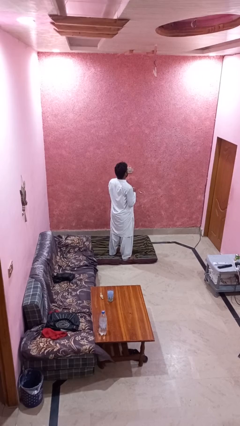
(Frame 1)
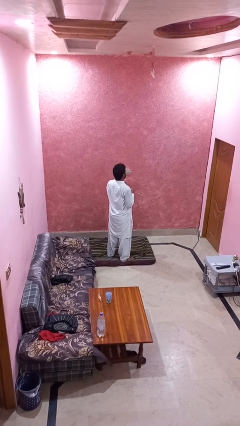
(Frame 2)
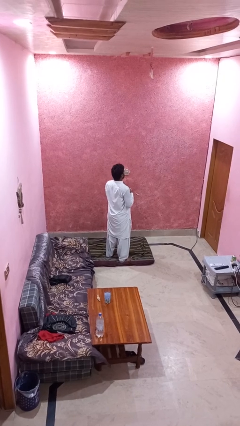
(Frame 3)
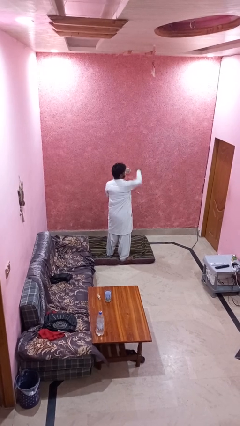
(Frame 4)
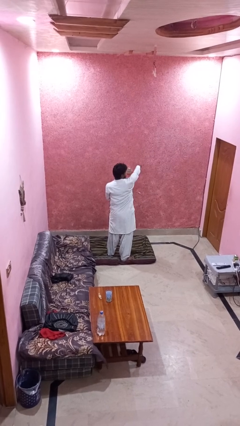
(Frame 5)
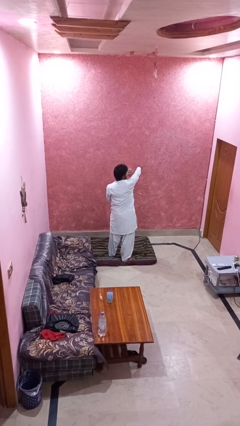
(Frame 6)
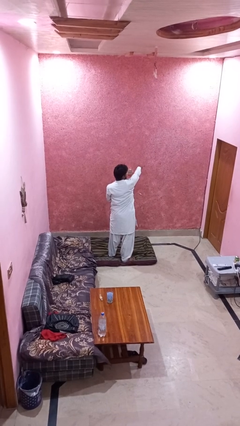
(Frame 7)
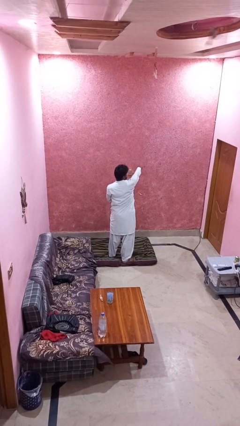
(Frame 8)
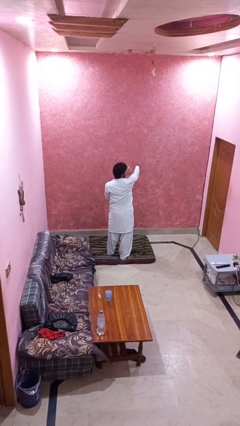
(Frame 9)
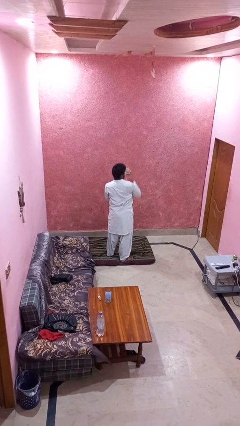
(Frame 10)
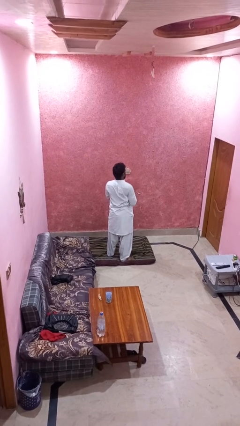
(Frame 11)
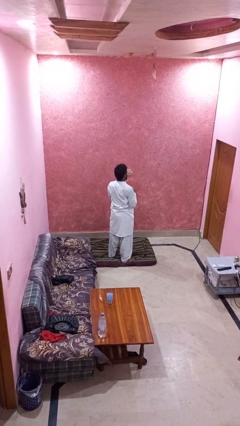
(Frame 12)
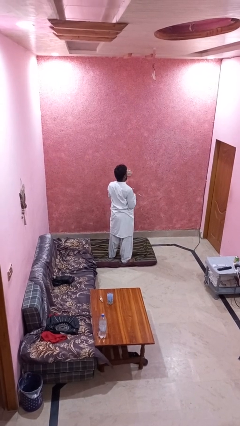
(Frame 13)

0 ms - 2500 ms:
person punches

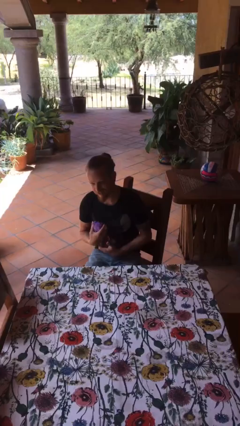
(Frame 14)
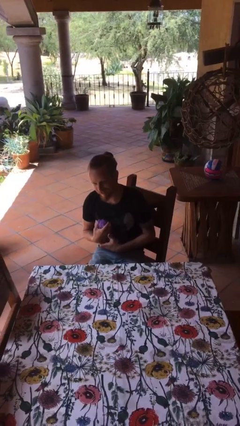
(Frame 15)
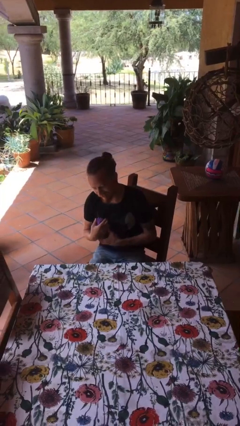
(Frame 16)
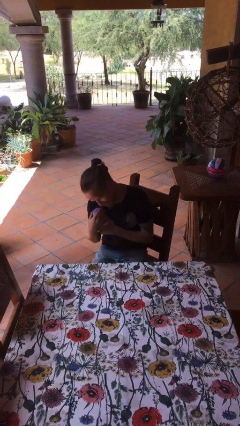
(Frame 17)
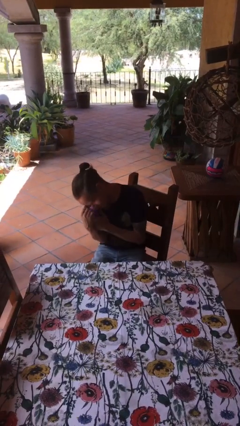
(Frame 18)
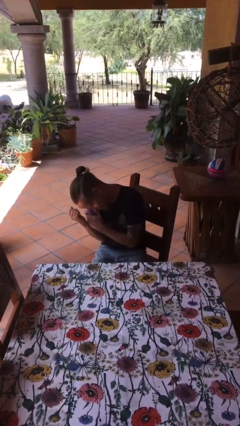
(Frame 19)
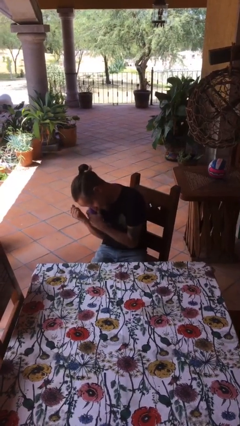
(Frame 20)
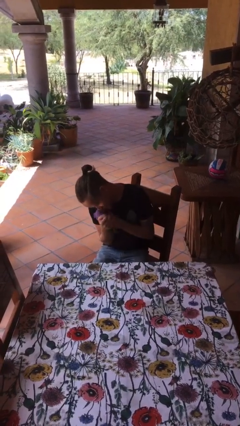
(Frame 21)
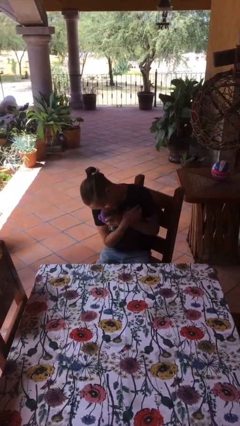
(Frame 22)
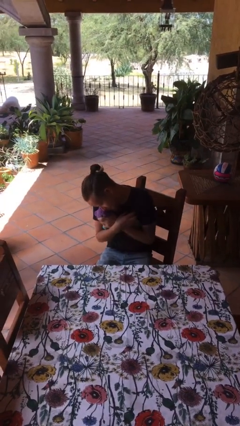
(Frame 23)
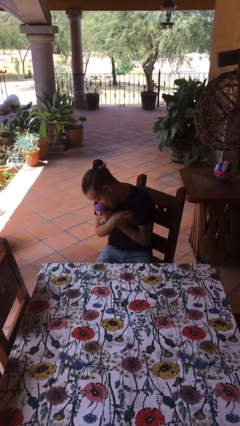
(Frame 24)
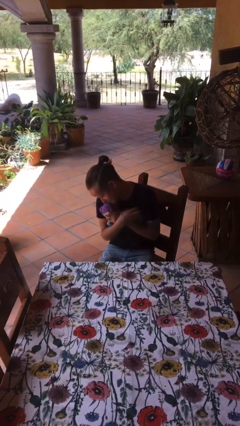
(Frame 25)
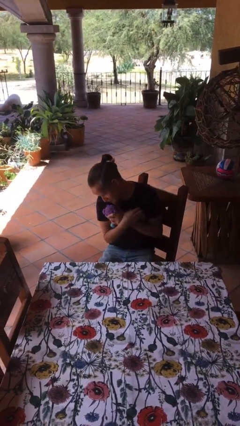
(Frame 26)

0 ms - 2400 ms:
person hugs stuffed animal

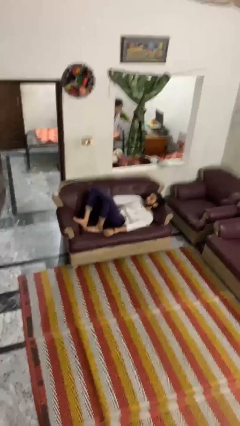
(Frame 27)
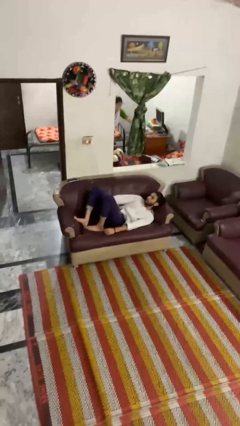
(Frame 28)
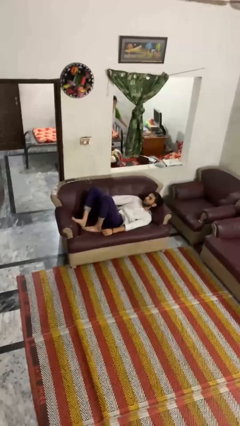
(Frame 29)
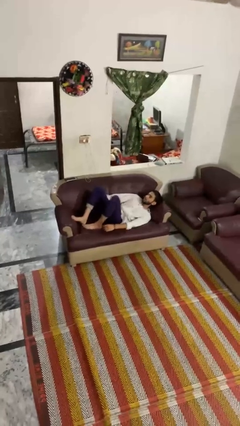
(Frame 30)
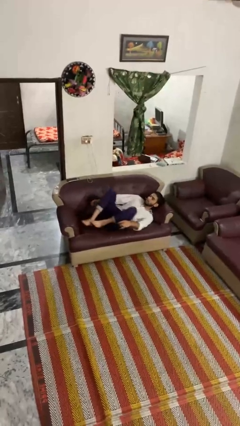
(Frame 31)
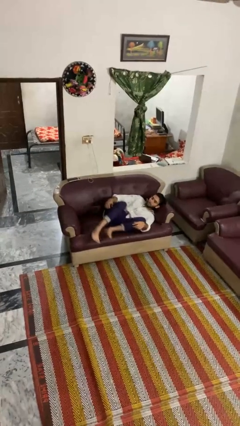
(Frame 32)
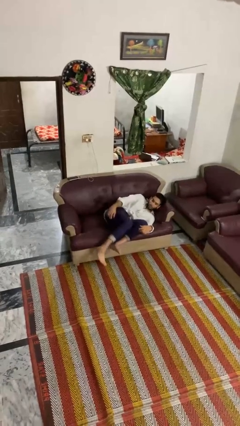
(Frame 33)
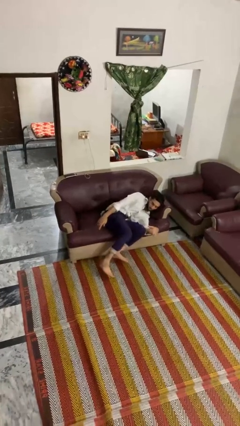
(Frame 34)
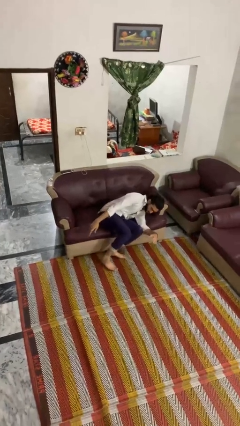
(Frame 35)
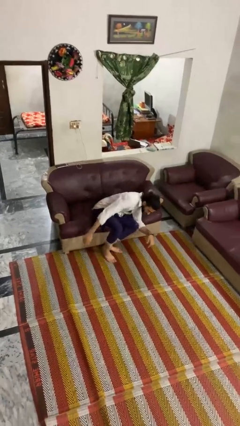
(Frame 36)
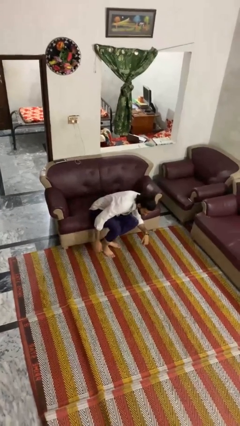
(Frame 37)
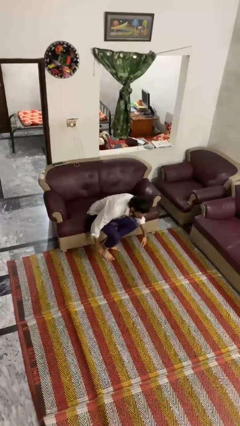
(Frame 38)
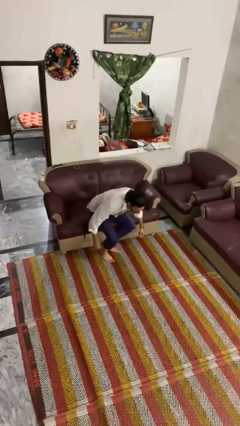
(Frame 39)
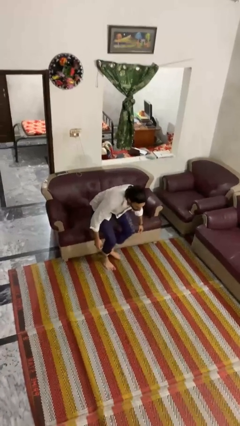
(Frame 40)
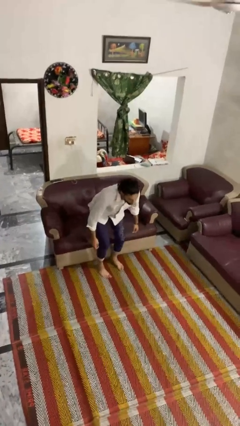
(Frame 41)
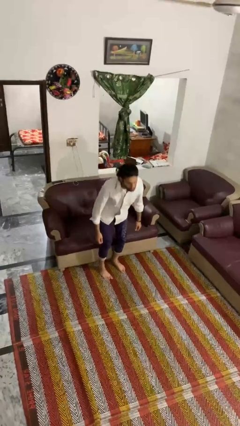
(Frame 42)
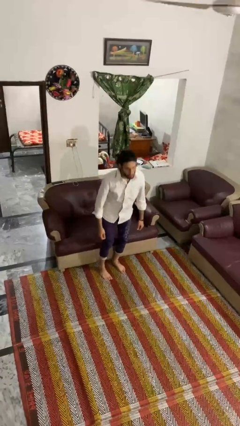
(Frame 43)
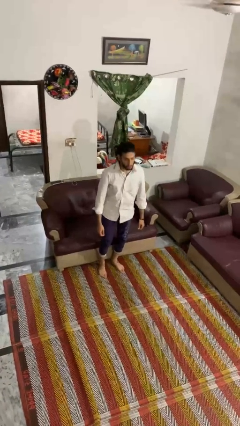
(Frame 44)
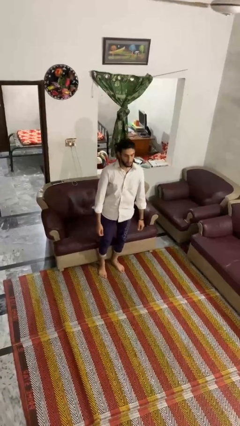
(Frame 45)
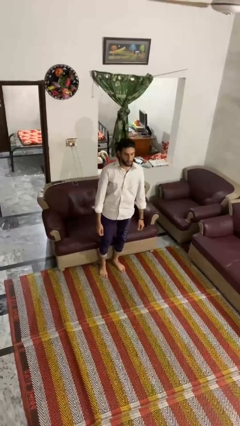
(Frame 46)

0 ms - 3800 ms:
person stands up

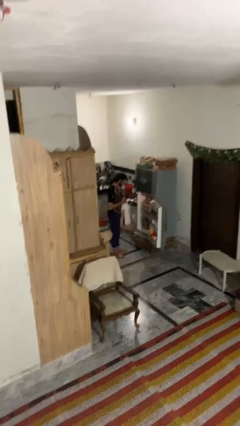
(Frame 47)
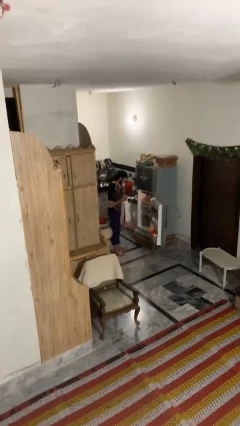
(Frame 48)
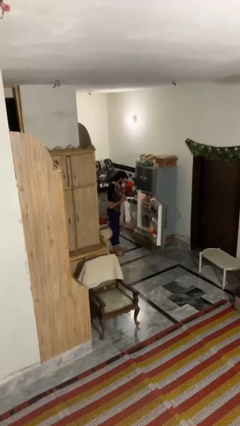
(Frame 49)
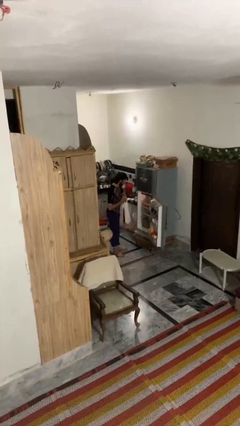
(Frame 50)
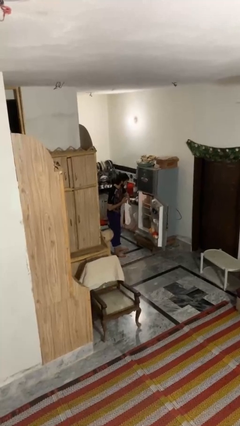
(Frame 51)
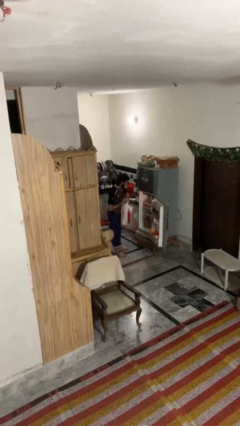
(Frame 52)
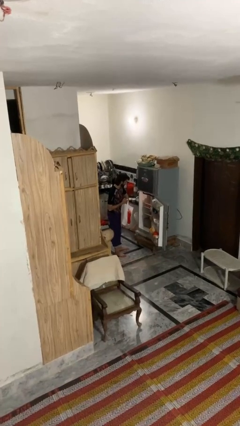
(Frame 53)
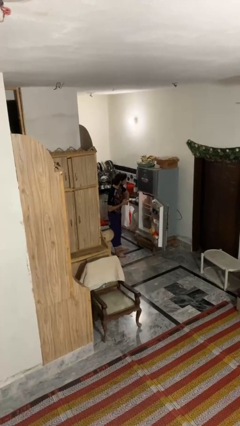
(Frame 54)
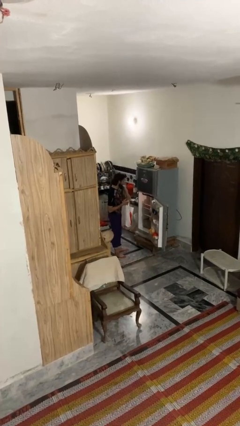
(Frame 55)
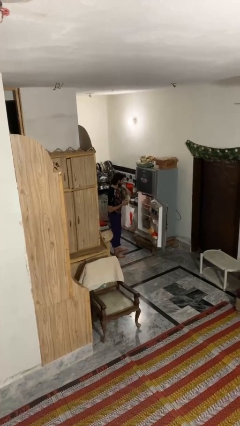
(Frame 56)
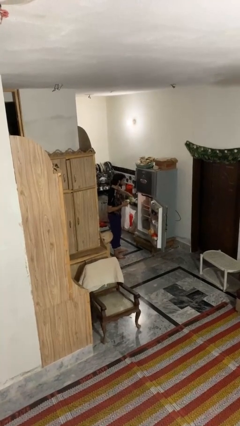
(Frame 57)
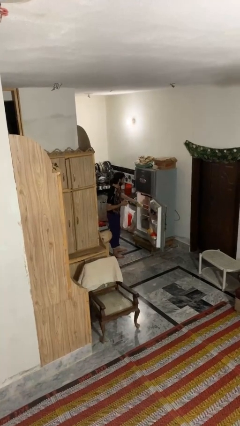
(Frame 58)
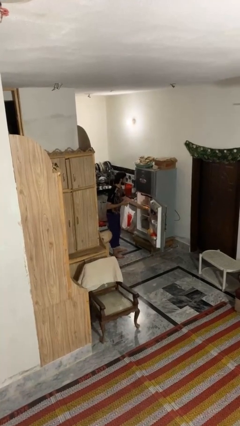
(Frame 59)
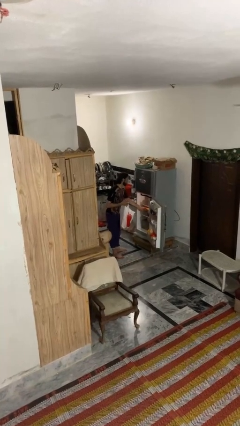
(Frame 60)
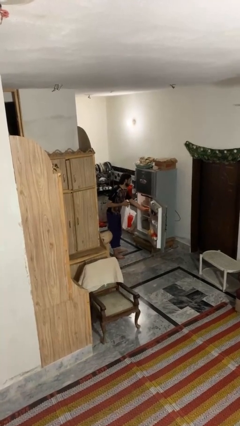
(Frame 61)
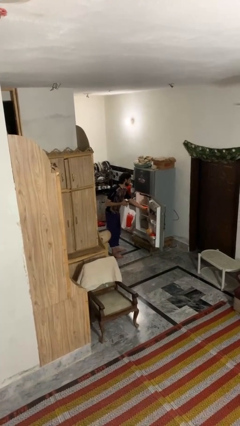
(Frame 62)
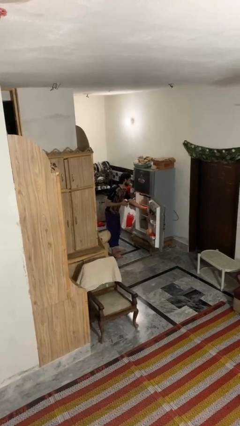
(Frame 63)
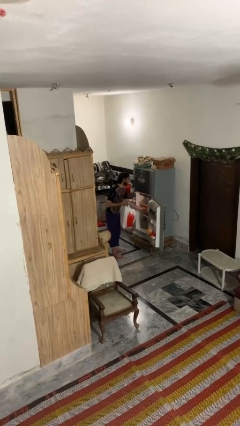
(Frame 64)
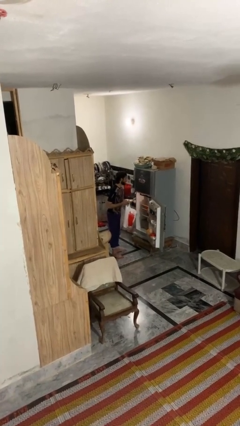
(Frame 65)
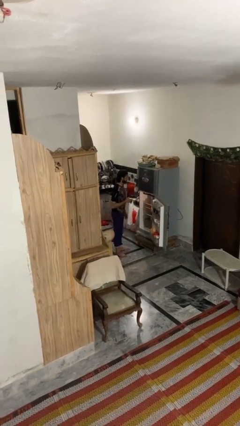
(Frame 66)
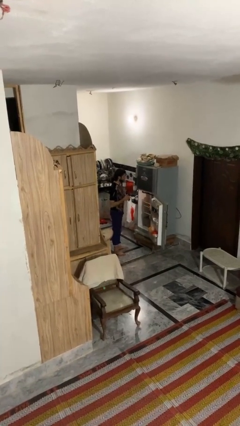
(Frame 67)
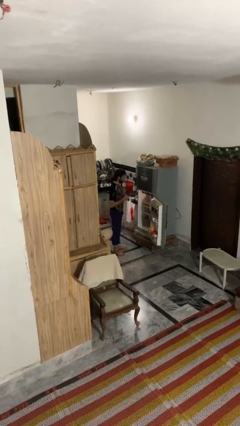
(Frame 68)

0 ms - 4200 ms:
person loads groceries into refrigerator

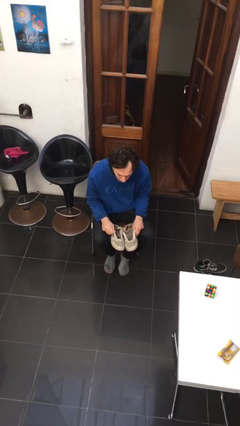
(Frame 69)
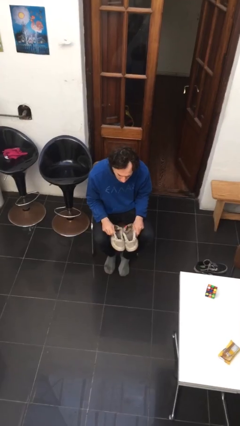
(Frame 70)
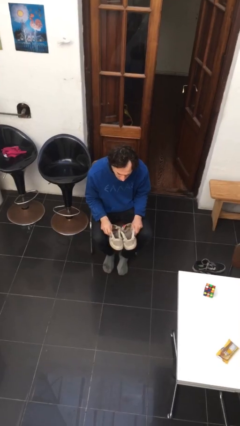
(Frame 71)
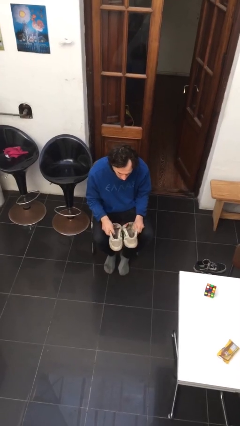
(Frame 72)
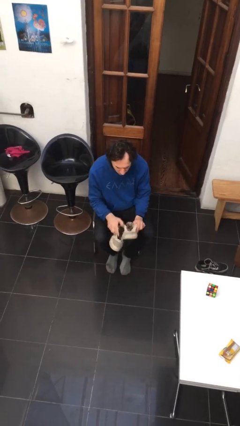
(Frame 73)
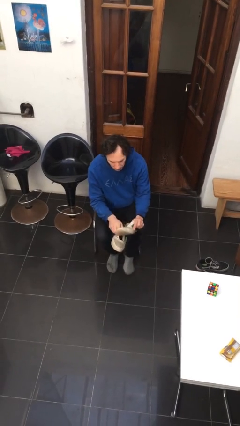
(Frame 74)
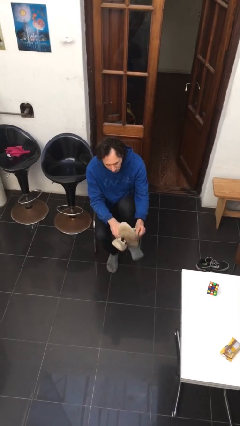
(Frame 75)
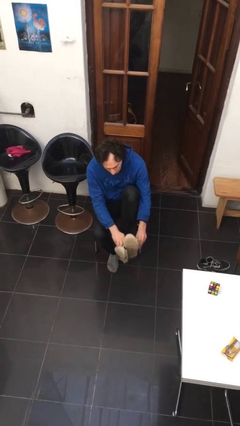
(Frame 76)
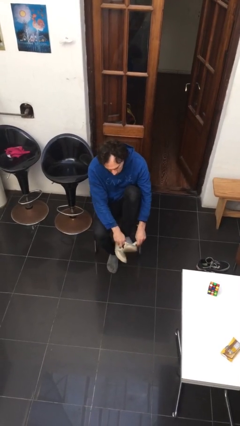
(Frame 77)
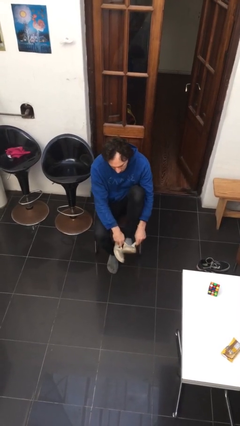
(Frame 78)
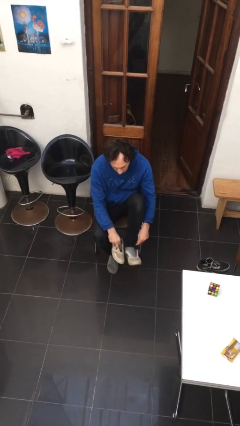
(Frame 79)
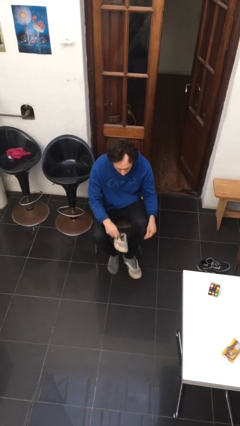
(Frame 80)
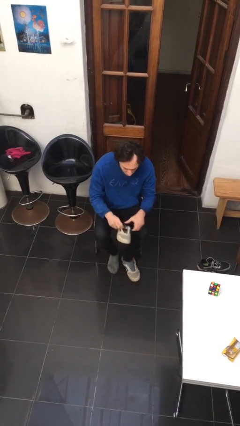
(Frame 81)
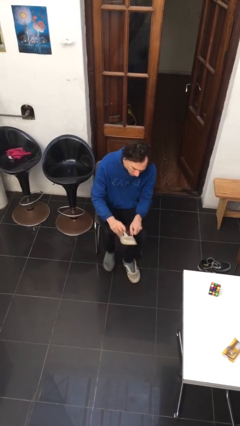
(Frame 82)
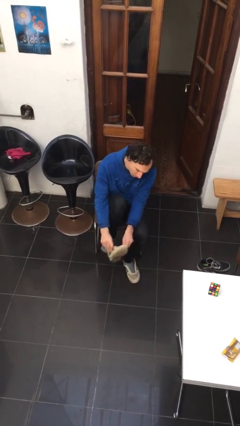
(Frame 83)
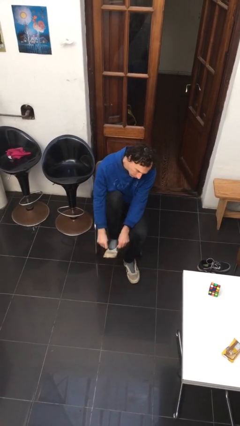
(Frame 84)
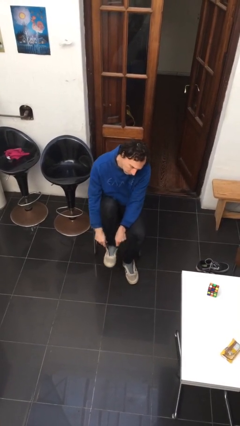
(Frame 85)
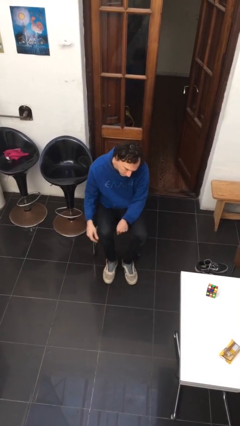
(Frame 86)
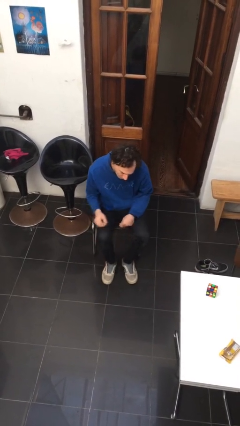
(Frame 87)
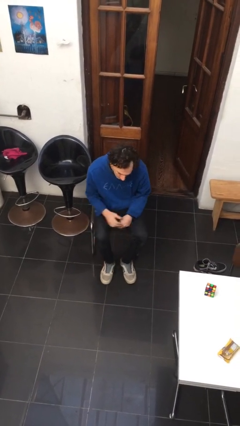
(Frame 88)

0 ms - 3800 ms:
person puts on shoes

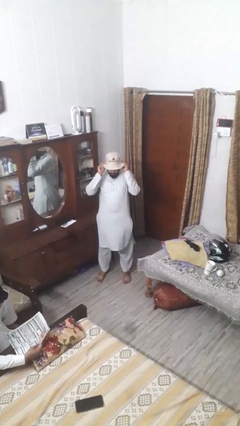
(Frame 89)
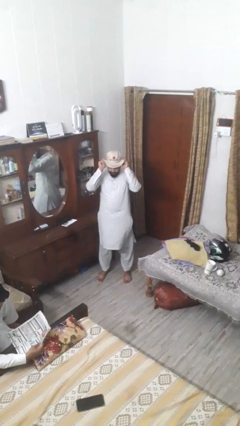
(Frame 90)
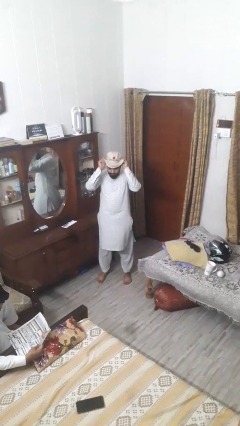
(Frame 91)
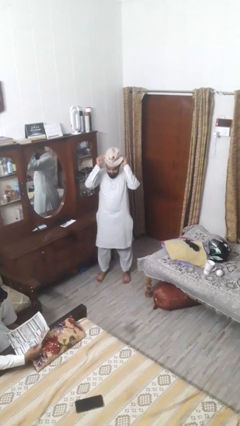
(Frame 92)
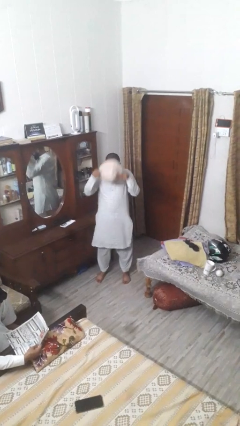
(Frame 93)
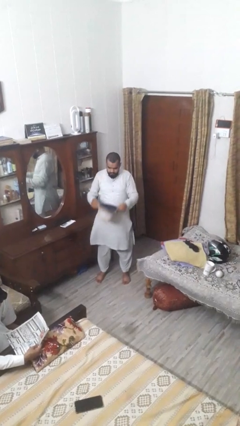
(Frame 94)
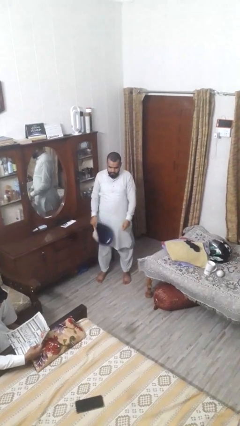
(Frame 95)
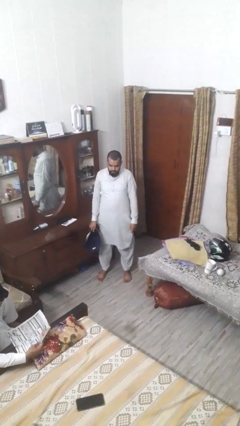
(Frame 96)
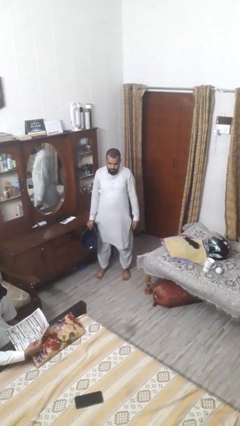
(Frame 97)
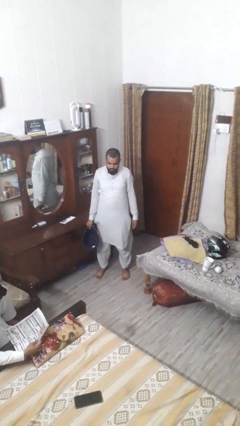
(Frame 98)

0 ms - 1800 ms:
person takes off hat
